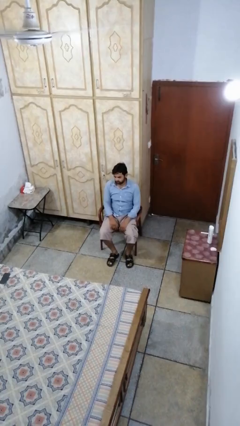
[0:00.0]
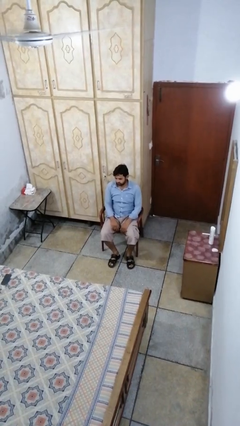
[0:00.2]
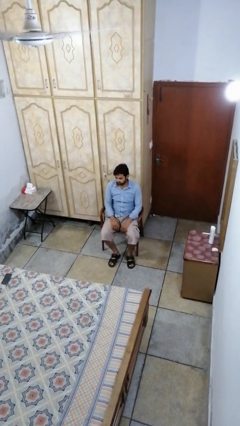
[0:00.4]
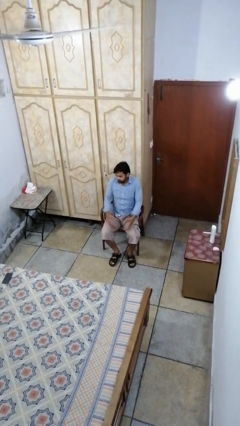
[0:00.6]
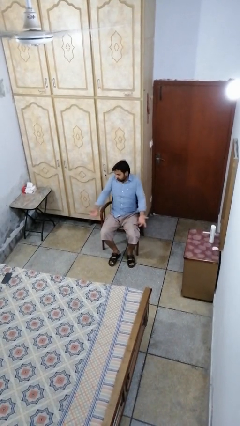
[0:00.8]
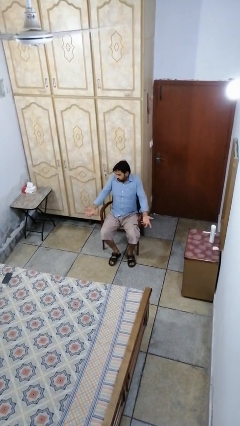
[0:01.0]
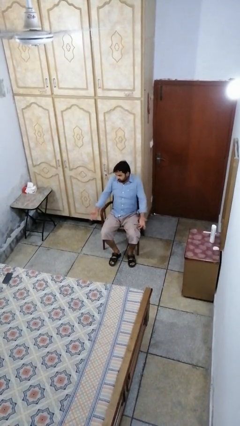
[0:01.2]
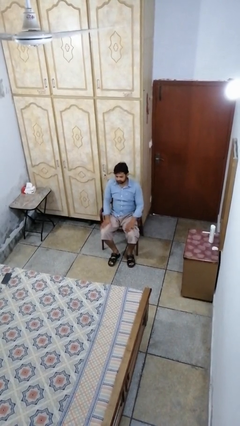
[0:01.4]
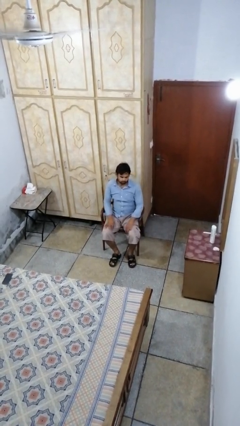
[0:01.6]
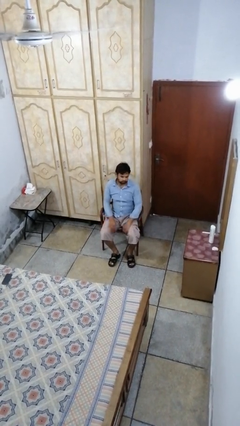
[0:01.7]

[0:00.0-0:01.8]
person shrugs

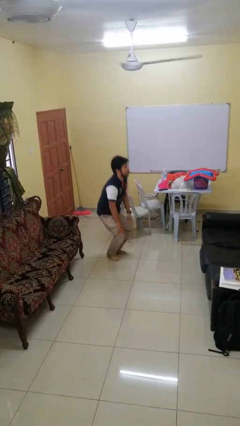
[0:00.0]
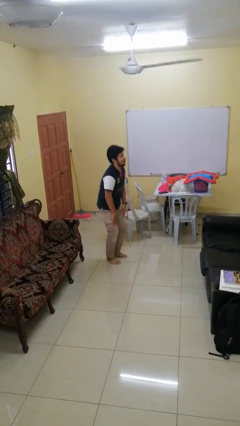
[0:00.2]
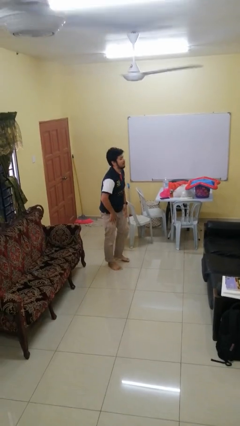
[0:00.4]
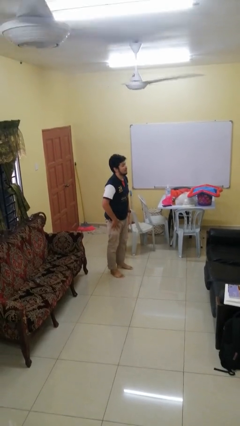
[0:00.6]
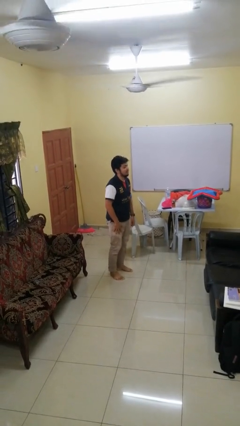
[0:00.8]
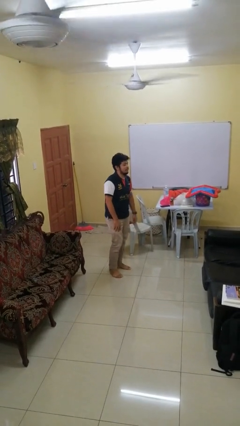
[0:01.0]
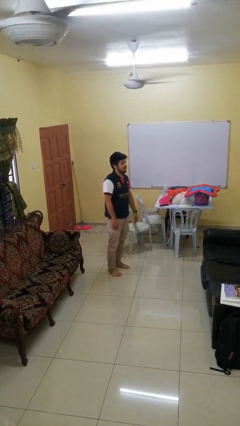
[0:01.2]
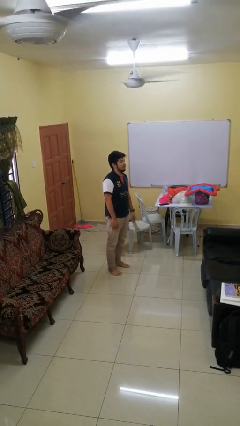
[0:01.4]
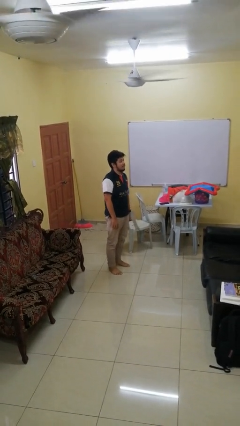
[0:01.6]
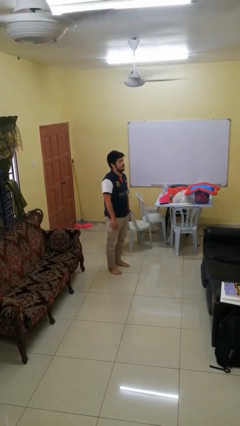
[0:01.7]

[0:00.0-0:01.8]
person stands up

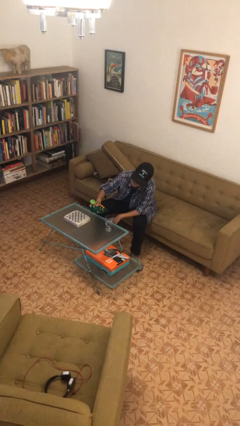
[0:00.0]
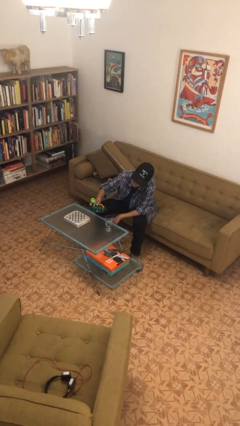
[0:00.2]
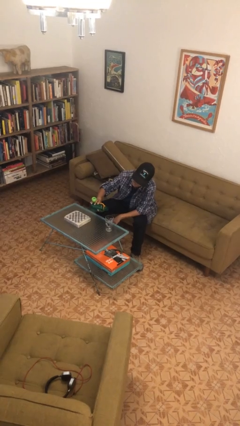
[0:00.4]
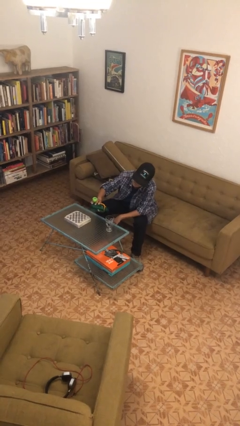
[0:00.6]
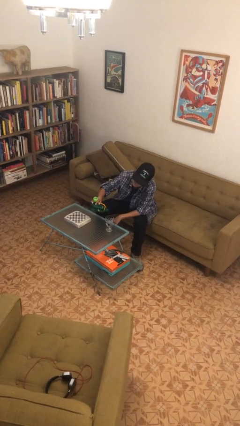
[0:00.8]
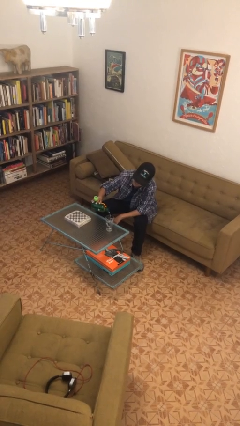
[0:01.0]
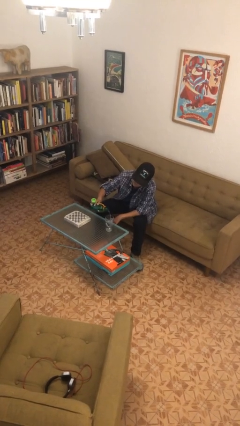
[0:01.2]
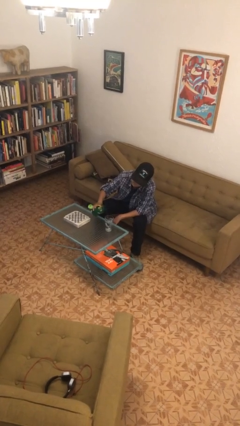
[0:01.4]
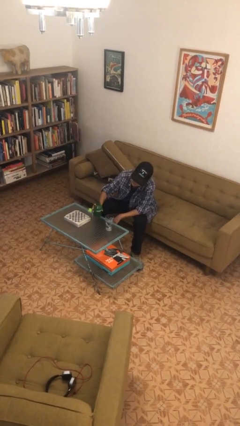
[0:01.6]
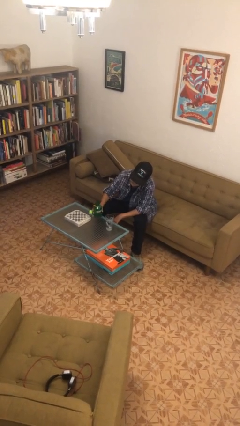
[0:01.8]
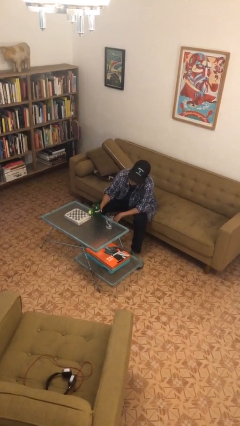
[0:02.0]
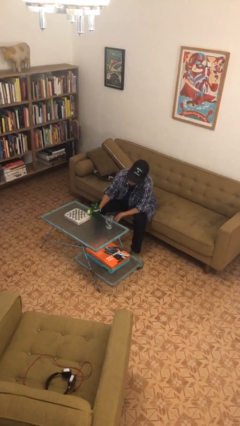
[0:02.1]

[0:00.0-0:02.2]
person pours liquid into cup

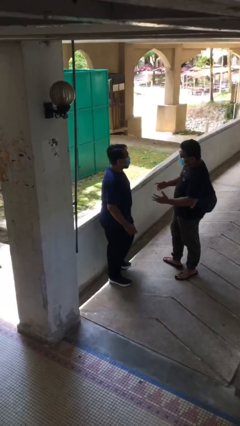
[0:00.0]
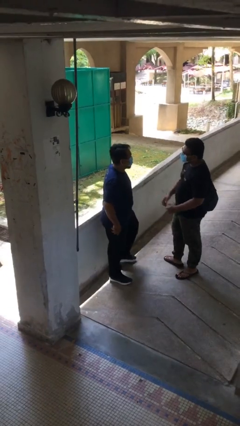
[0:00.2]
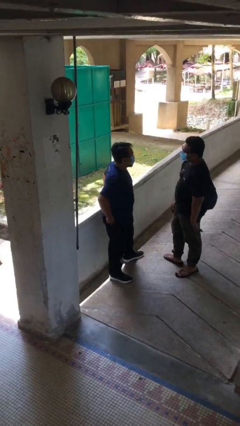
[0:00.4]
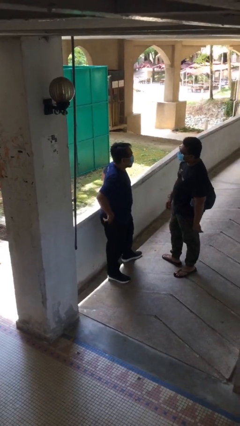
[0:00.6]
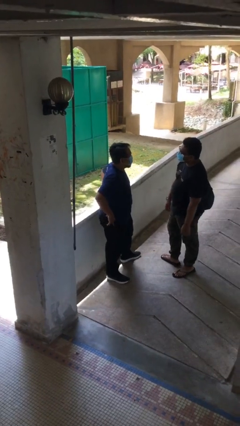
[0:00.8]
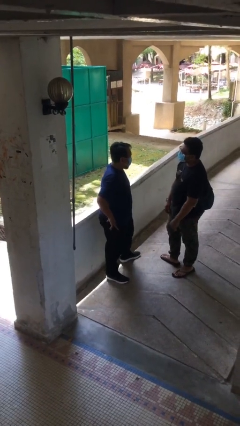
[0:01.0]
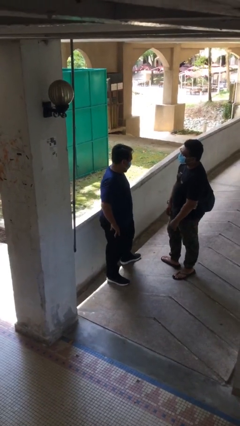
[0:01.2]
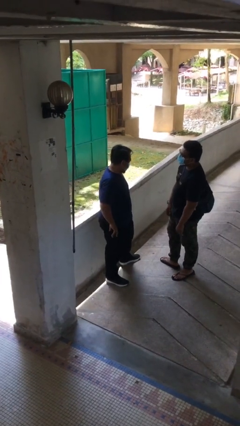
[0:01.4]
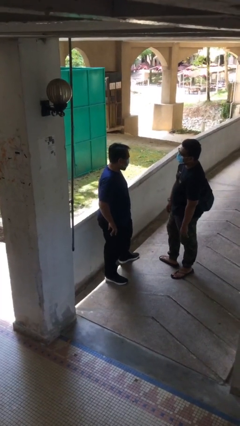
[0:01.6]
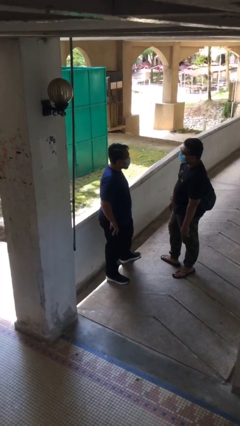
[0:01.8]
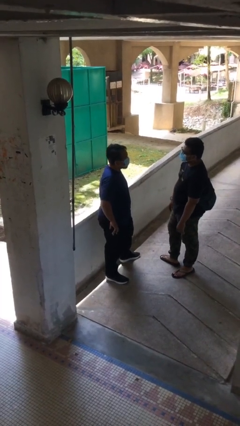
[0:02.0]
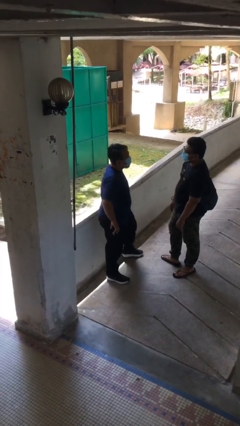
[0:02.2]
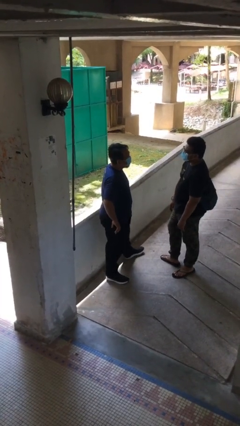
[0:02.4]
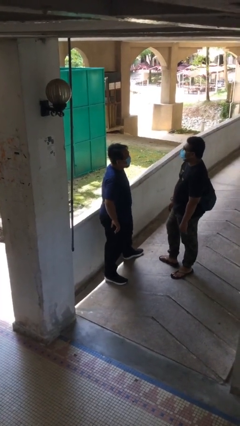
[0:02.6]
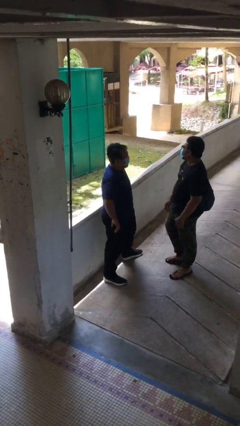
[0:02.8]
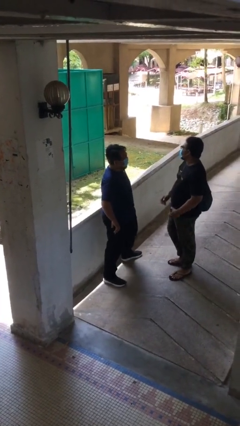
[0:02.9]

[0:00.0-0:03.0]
person talks to person

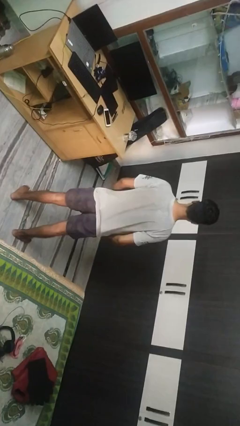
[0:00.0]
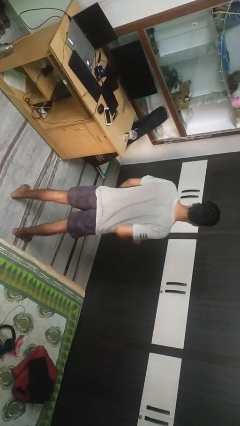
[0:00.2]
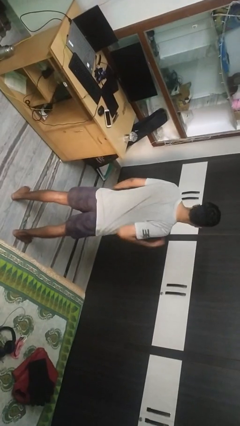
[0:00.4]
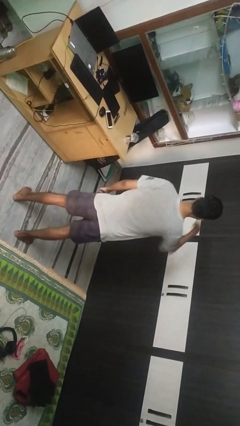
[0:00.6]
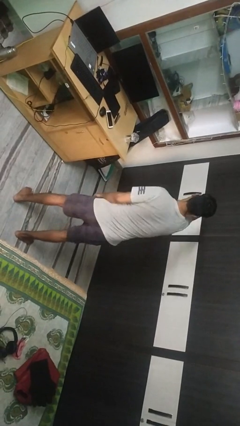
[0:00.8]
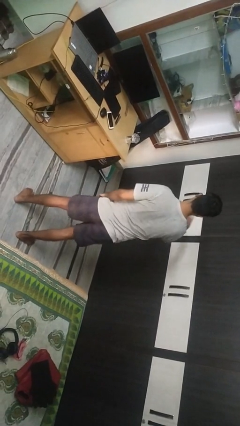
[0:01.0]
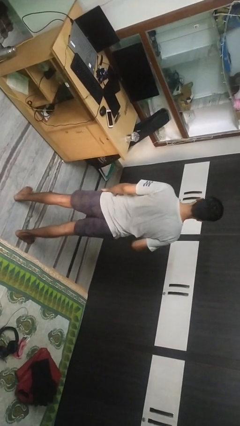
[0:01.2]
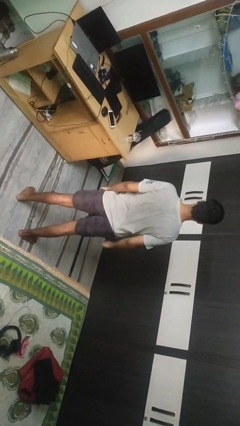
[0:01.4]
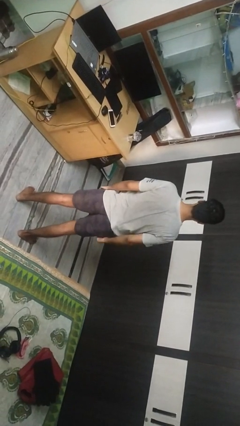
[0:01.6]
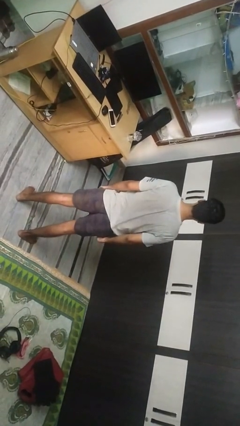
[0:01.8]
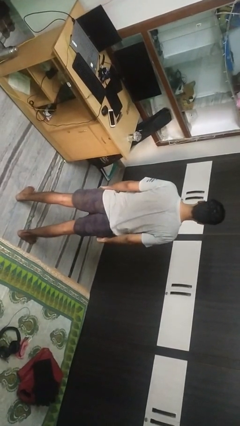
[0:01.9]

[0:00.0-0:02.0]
person punches

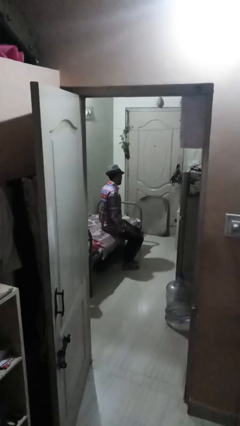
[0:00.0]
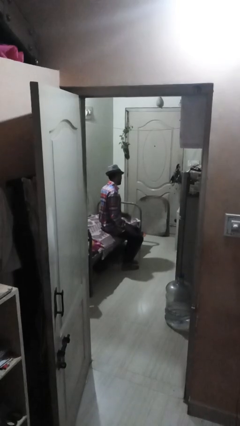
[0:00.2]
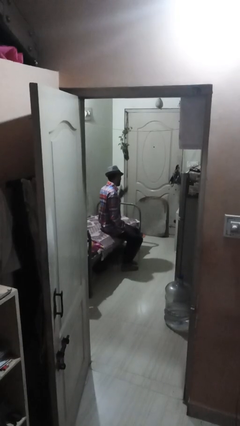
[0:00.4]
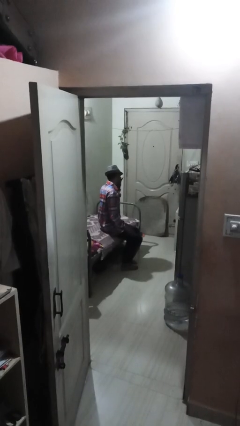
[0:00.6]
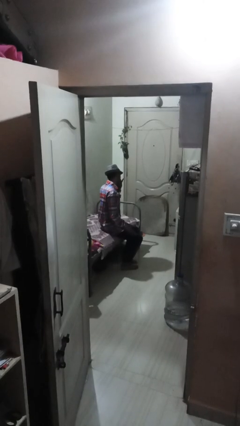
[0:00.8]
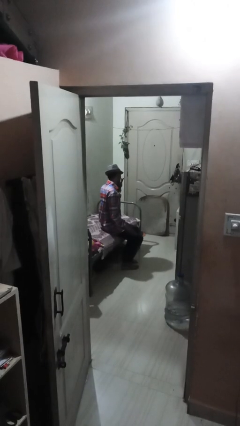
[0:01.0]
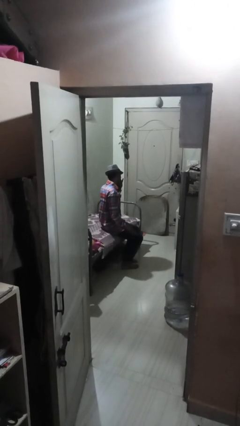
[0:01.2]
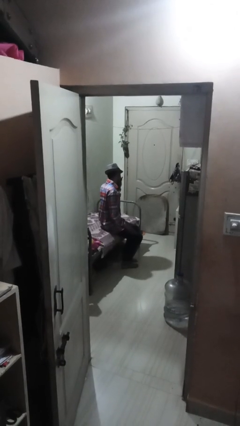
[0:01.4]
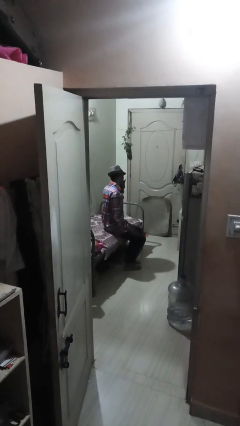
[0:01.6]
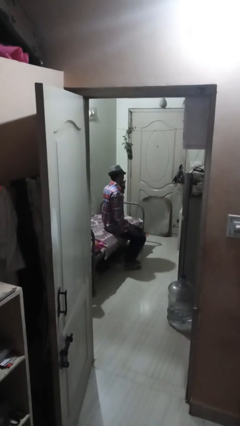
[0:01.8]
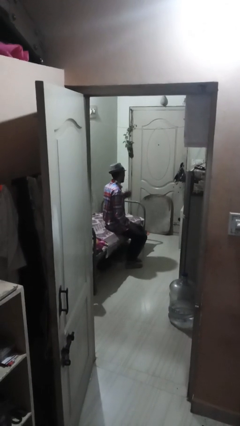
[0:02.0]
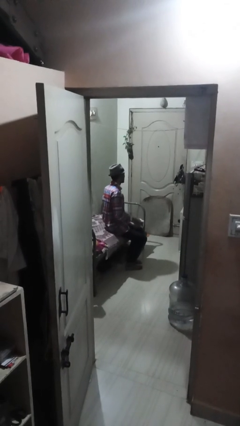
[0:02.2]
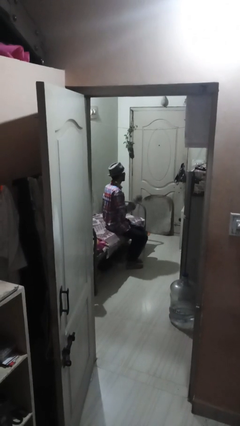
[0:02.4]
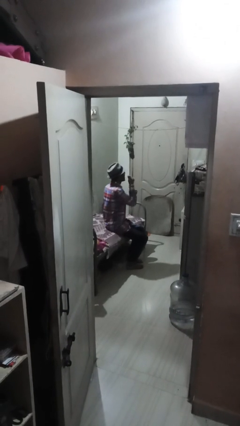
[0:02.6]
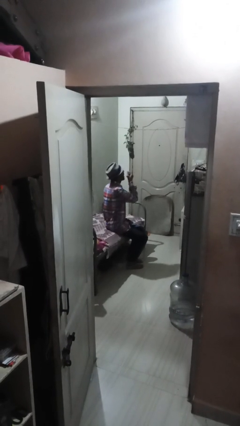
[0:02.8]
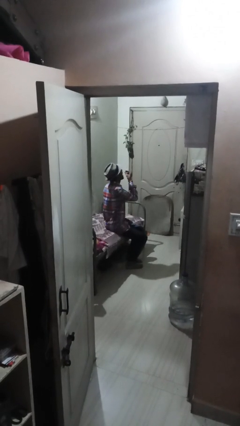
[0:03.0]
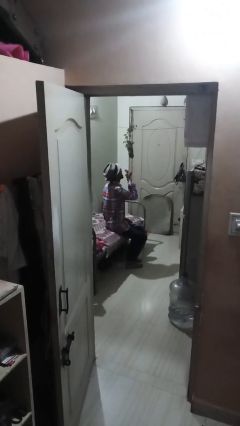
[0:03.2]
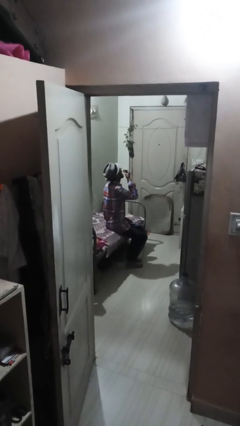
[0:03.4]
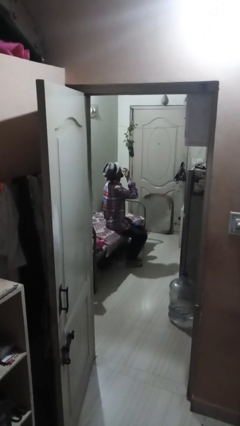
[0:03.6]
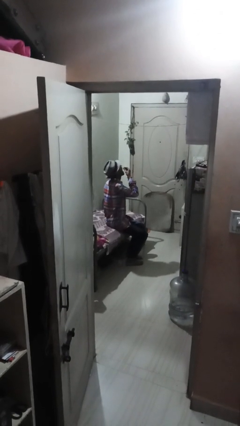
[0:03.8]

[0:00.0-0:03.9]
person yawns

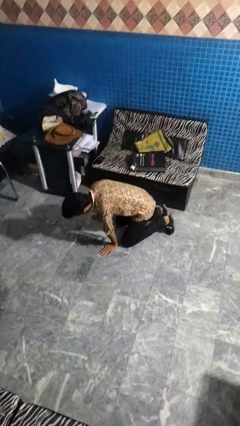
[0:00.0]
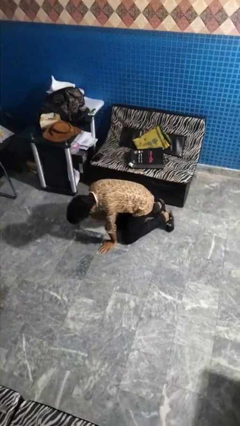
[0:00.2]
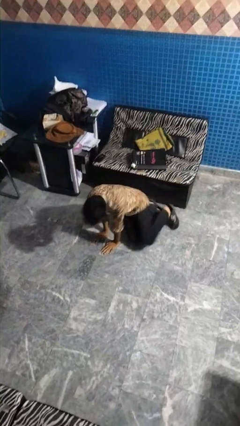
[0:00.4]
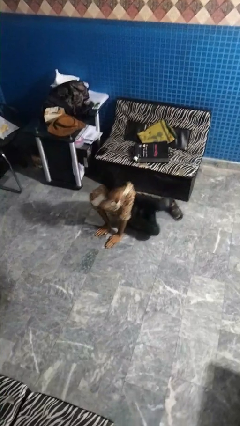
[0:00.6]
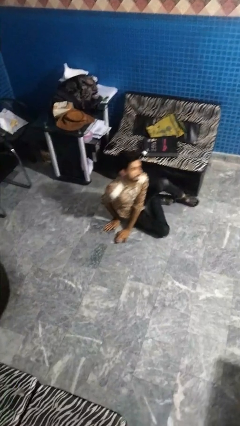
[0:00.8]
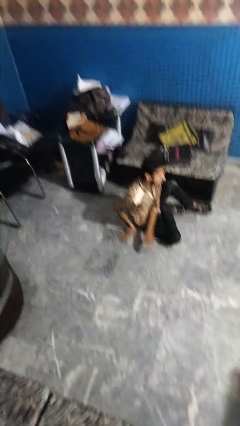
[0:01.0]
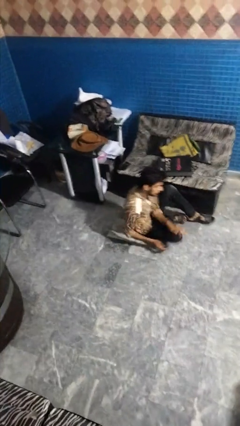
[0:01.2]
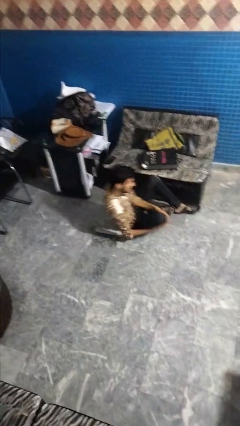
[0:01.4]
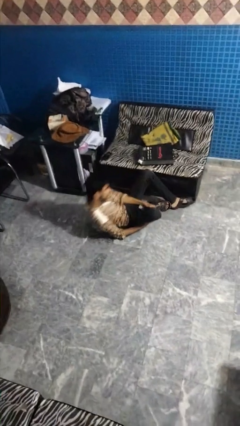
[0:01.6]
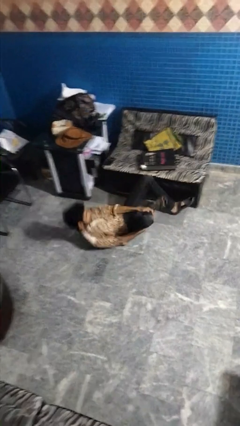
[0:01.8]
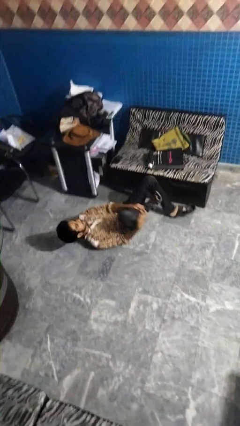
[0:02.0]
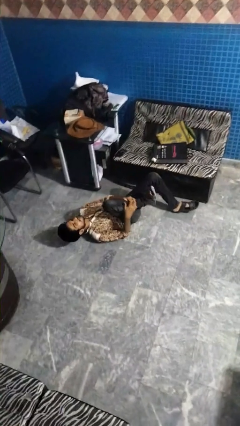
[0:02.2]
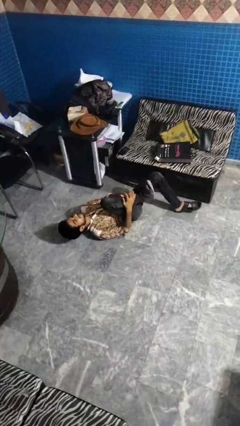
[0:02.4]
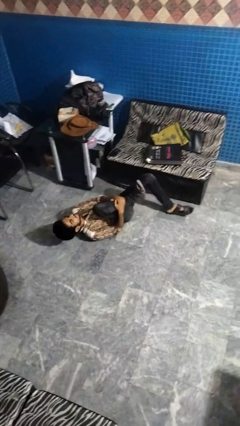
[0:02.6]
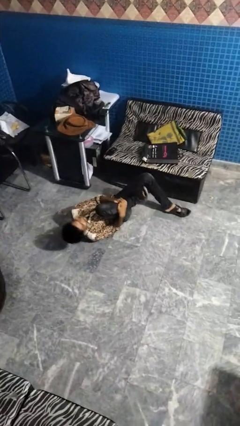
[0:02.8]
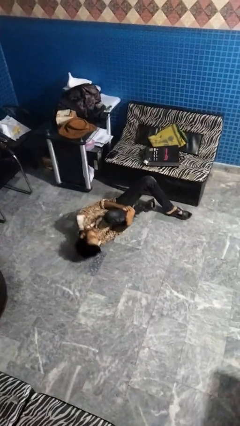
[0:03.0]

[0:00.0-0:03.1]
person lies down on floor
